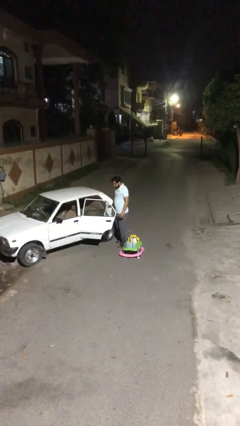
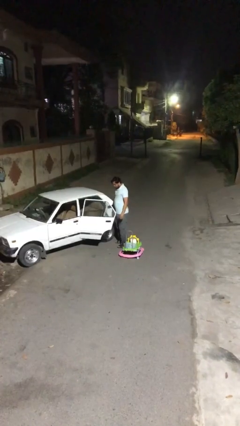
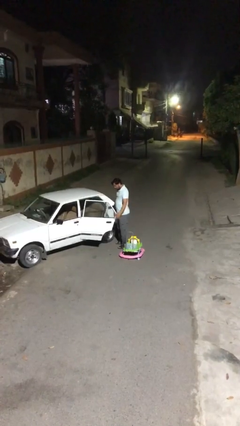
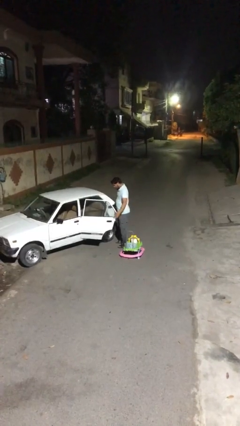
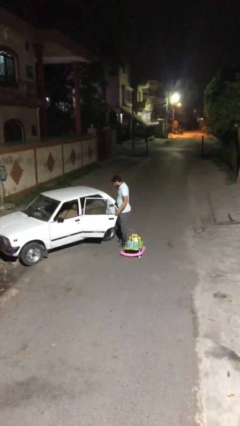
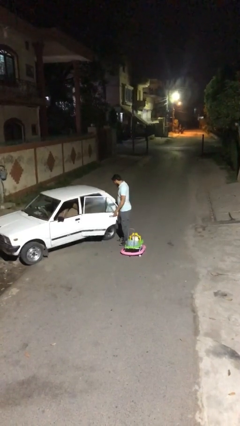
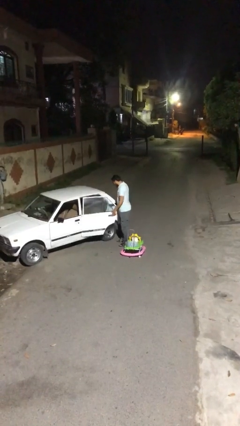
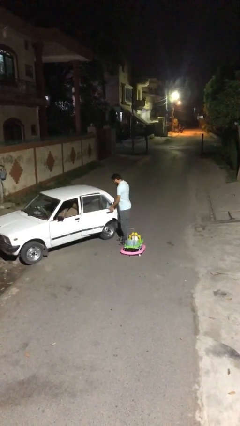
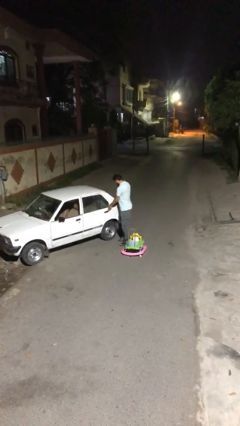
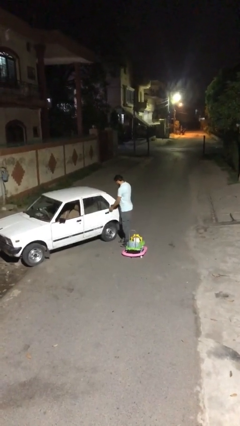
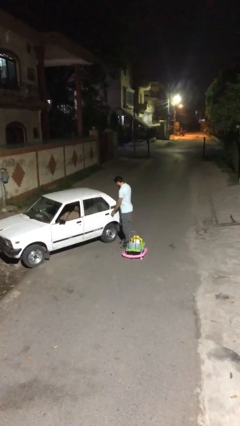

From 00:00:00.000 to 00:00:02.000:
person closes car door

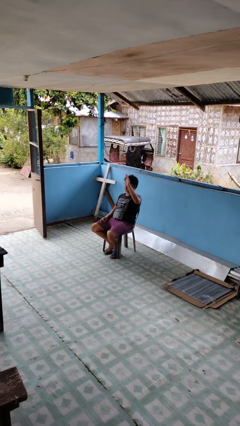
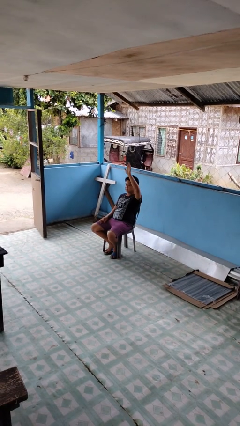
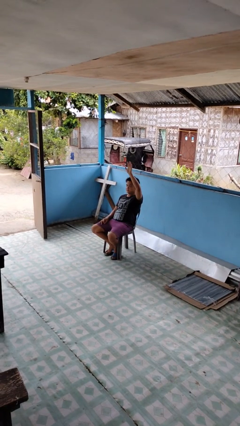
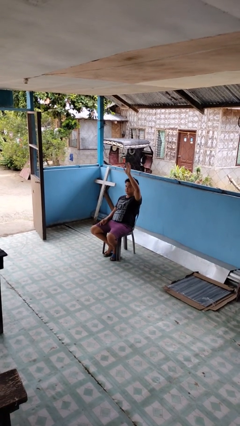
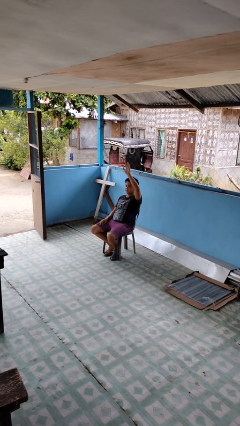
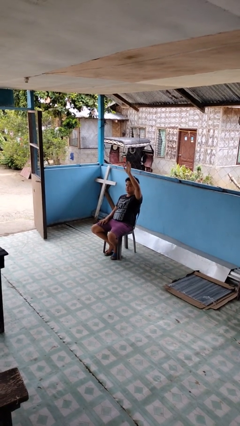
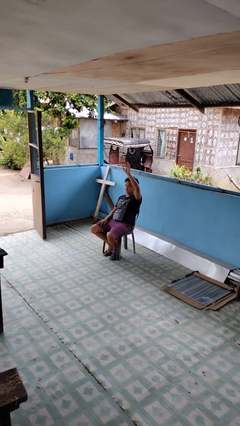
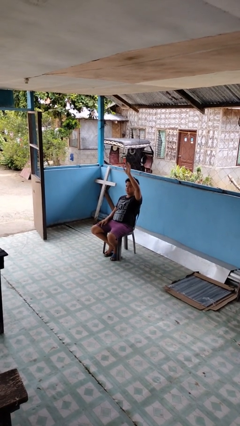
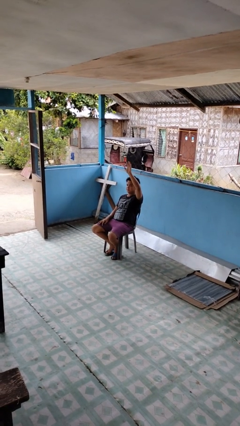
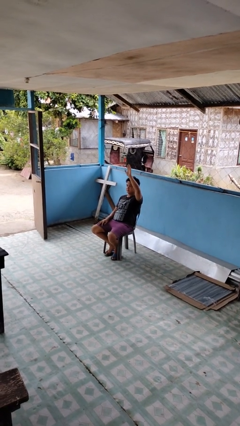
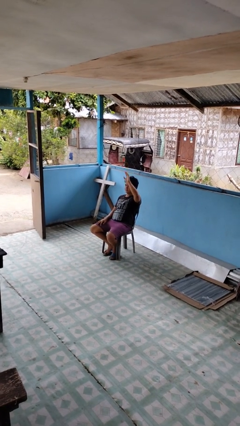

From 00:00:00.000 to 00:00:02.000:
person gestures raise hand

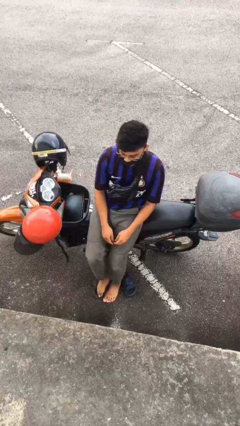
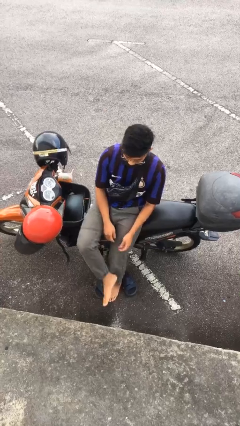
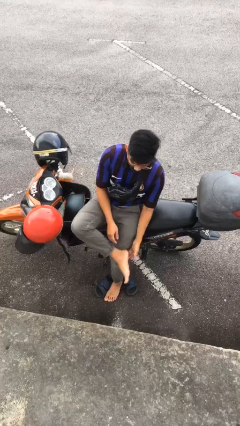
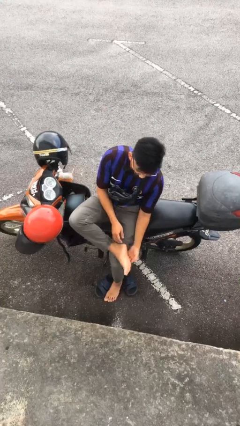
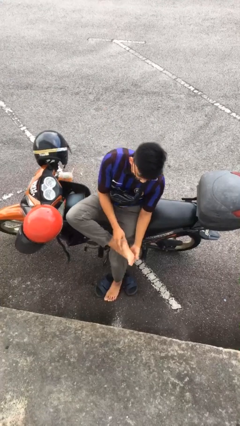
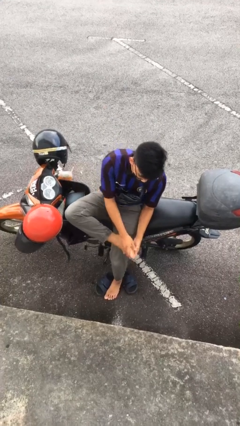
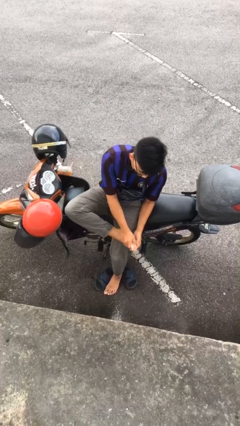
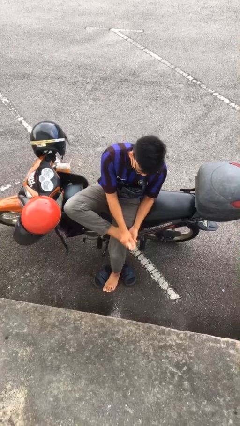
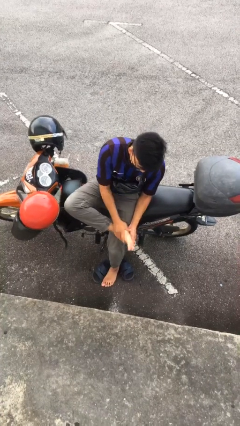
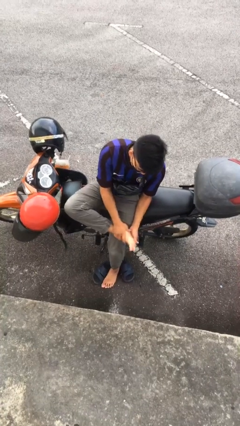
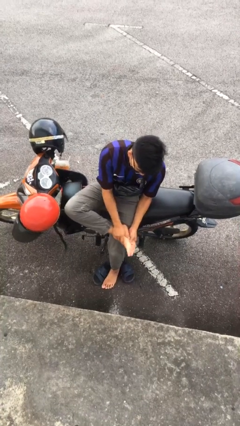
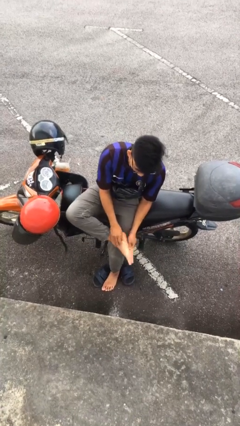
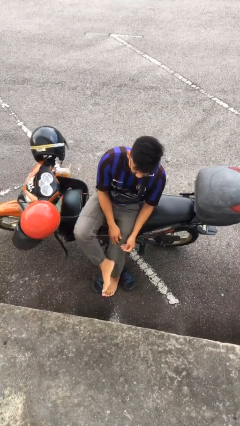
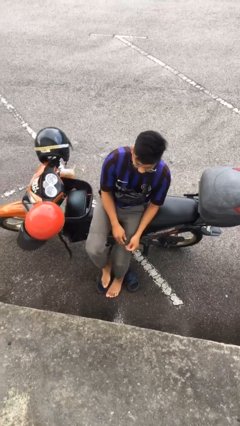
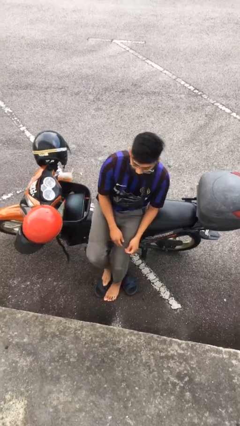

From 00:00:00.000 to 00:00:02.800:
person rubs foot

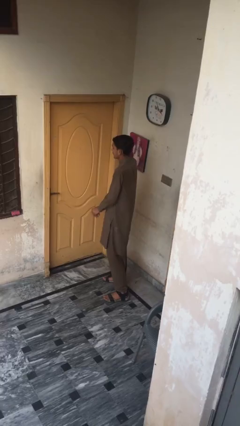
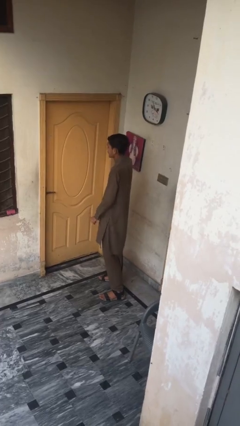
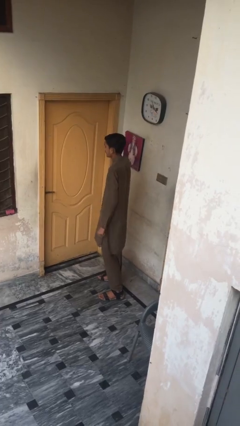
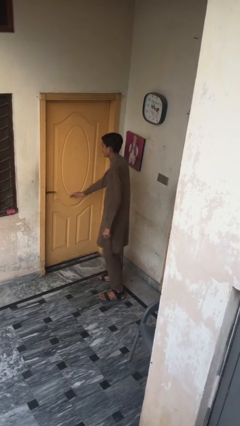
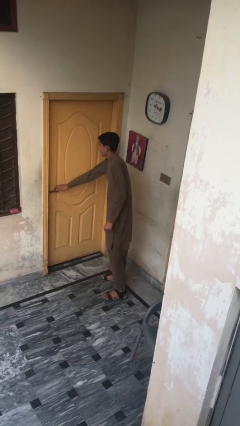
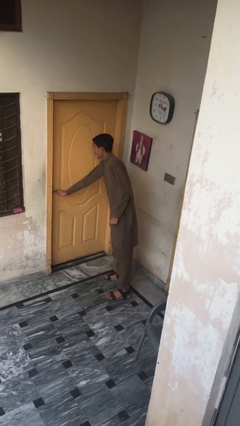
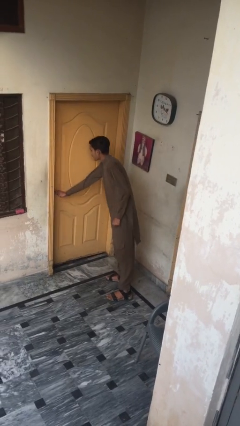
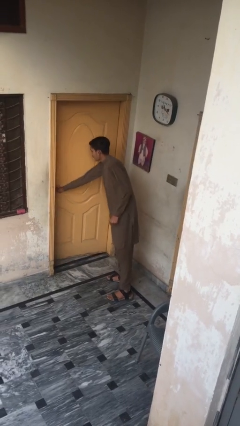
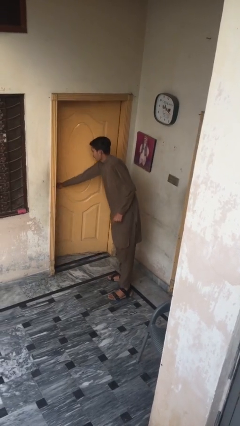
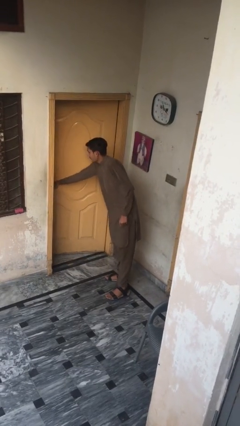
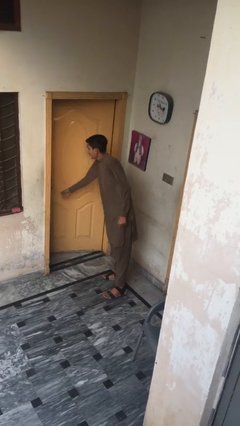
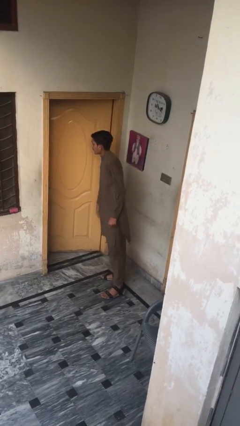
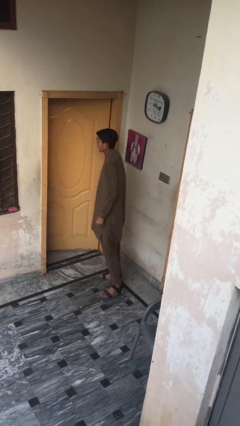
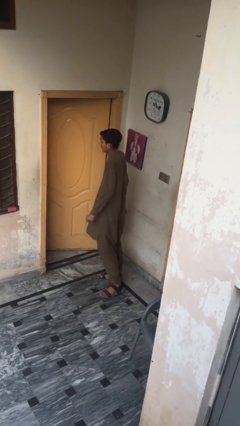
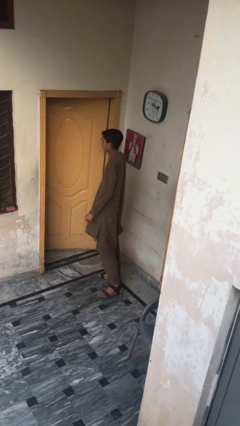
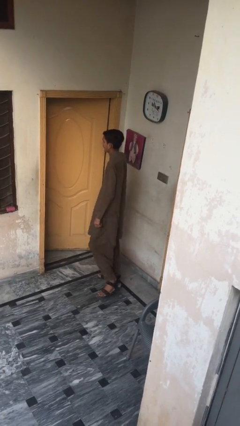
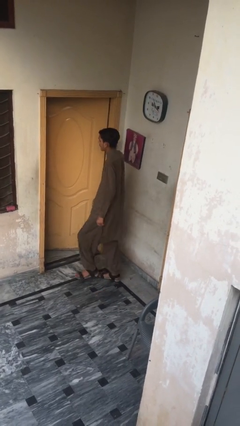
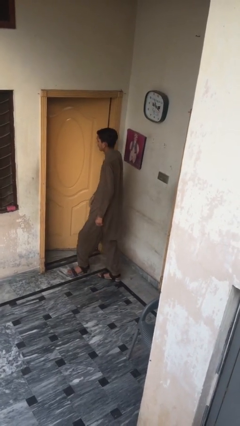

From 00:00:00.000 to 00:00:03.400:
person opens facility door

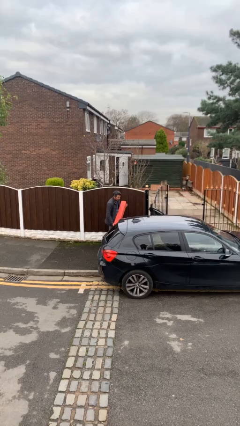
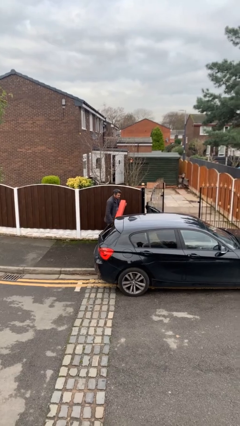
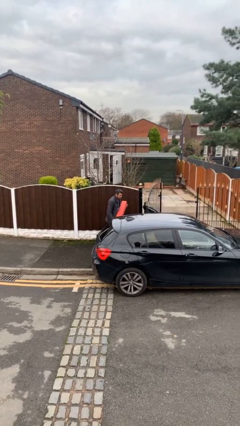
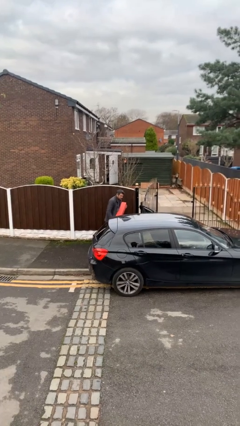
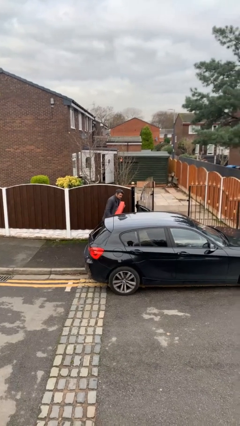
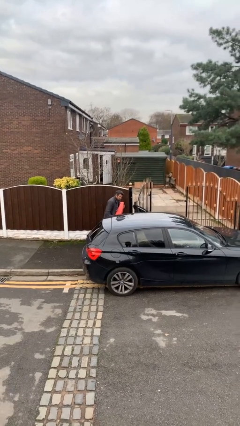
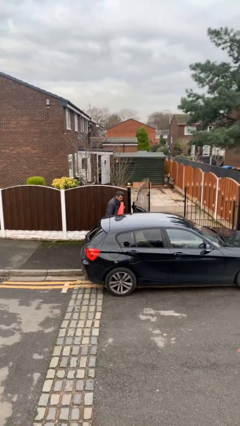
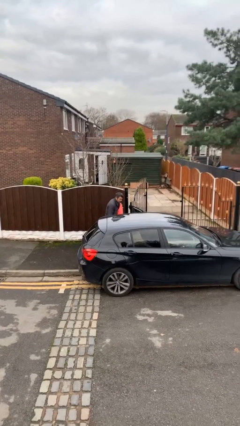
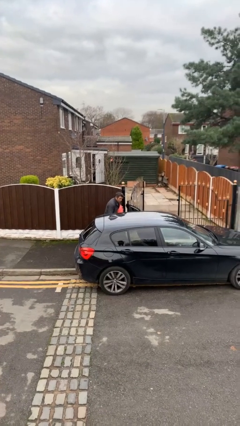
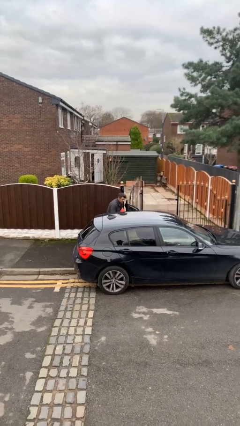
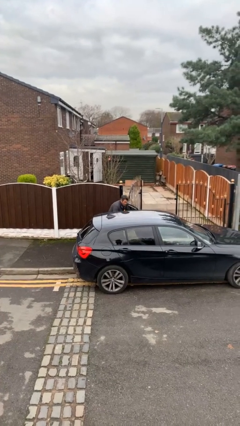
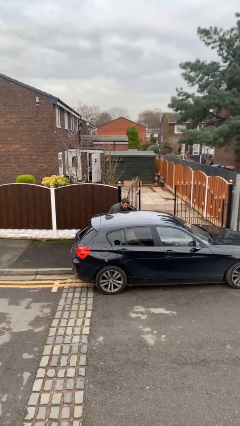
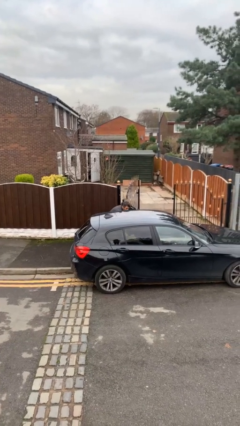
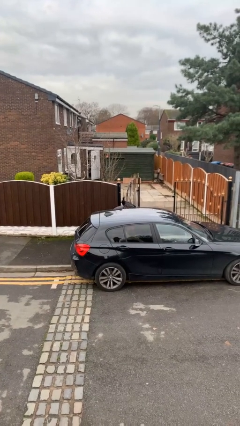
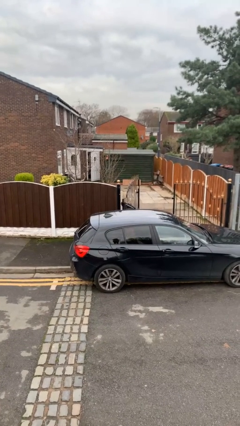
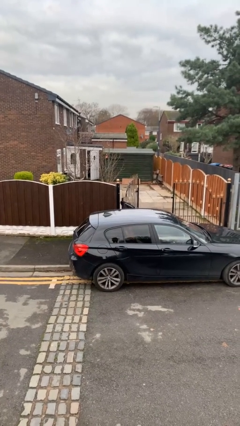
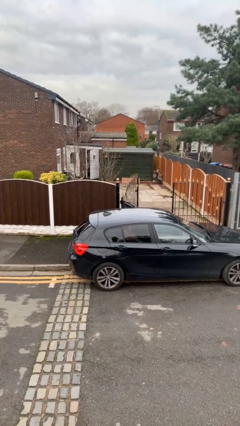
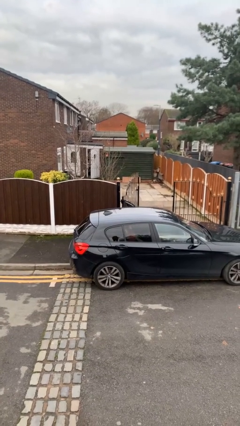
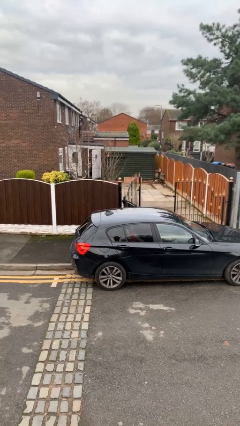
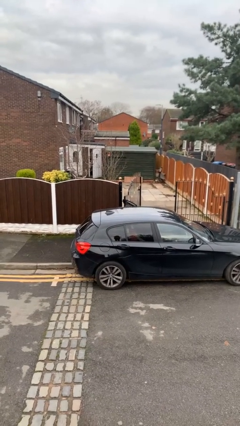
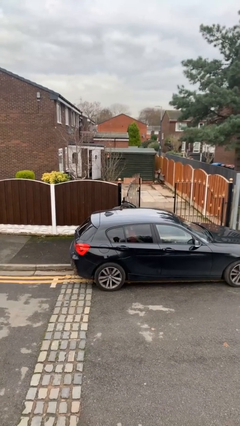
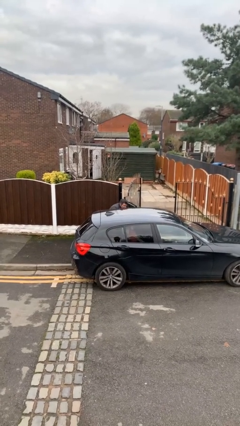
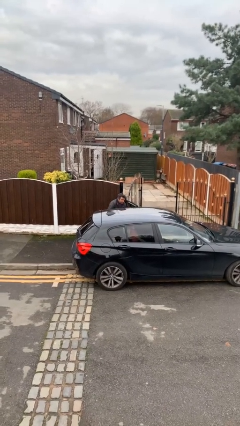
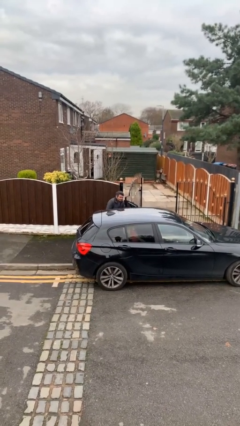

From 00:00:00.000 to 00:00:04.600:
person loads car

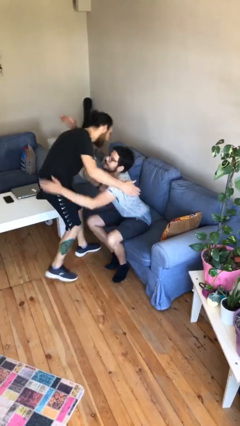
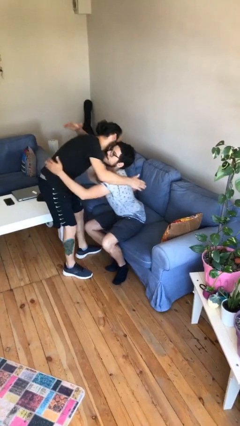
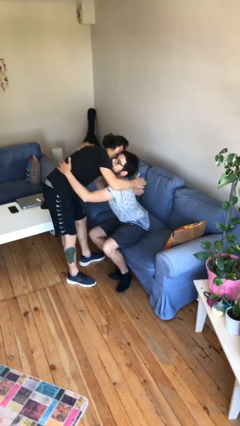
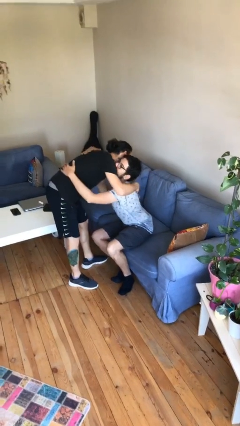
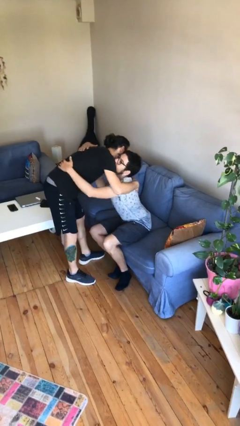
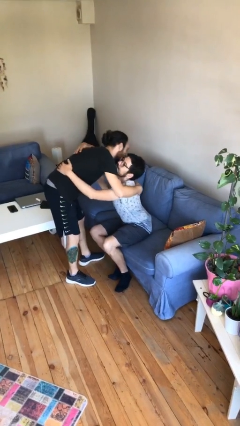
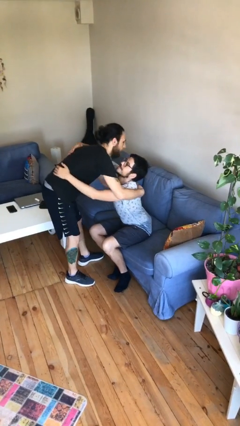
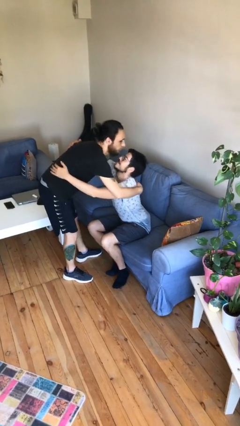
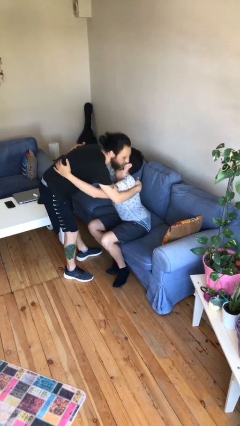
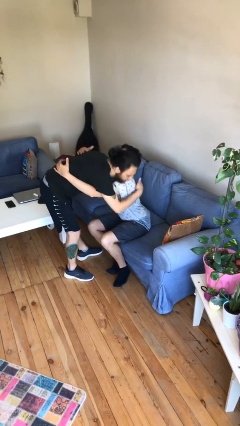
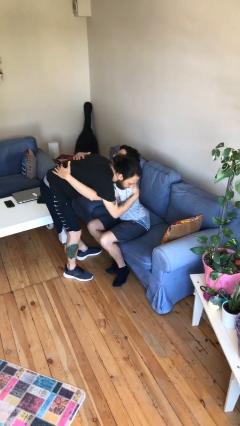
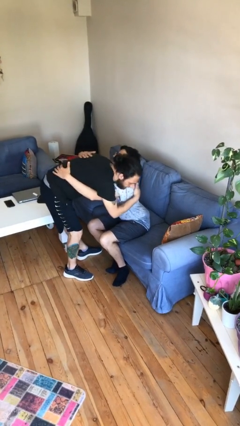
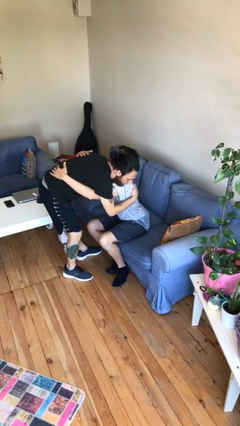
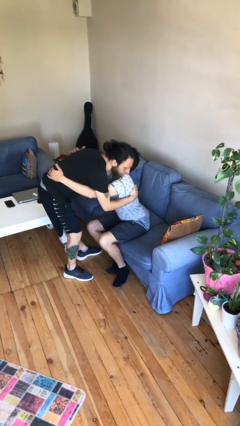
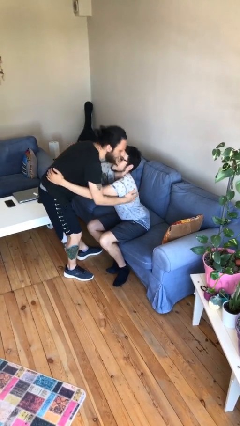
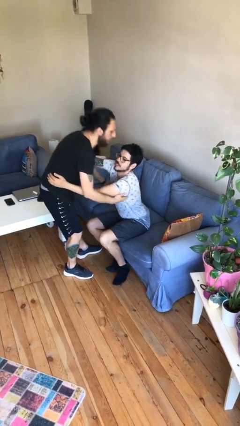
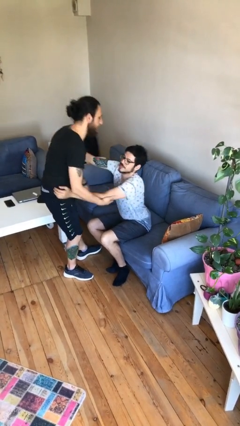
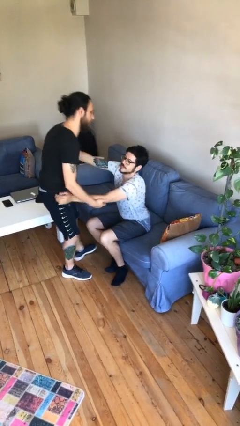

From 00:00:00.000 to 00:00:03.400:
person embraces person
